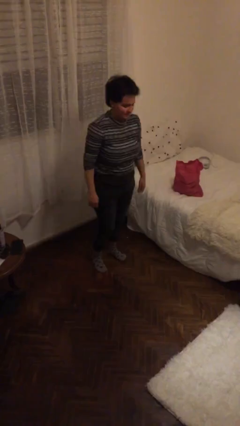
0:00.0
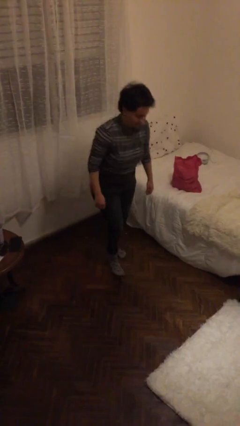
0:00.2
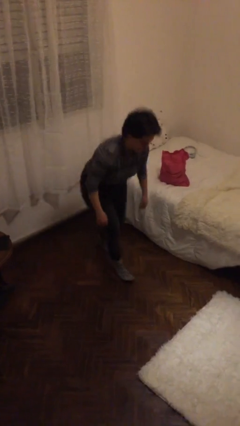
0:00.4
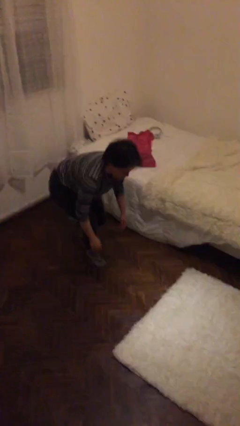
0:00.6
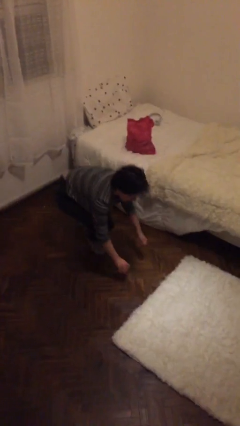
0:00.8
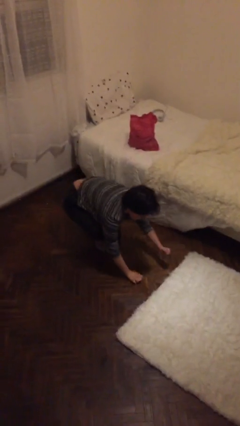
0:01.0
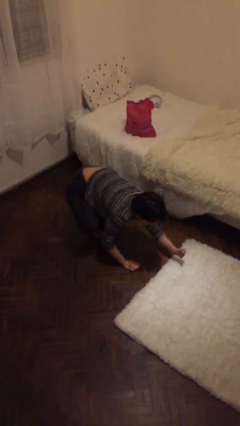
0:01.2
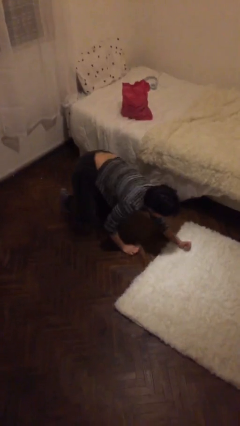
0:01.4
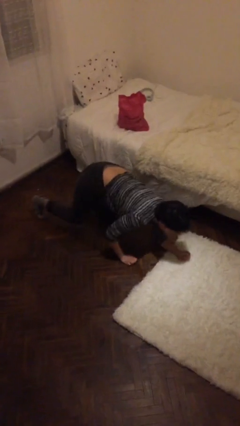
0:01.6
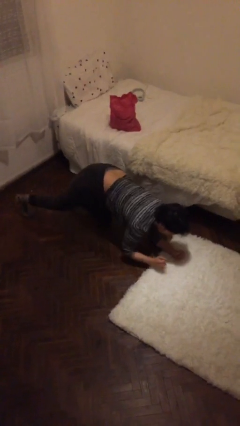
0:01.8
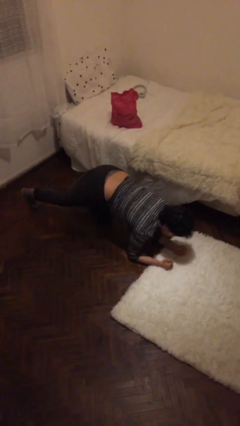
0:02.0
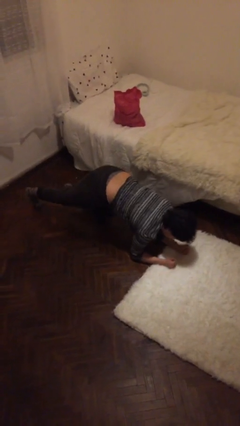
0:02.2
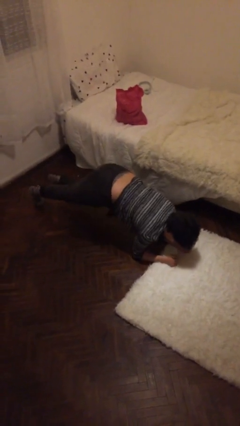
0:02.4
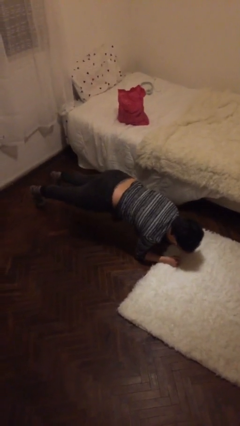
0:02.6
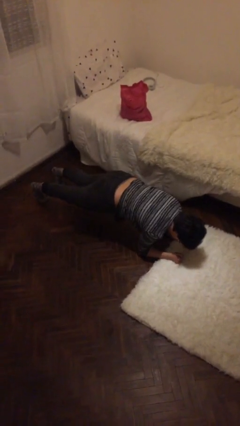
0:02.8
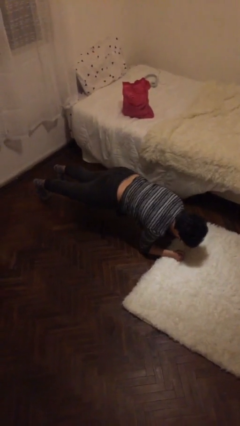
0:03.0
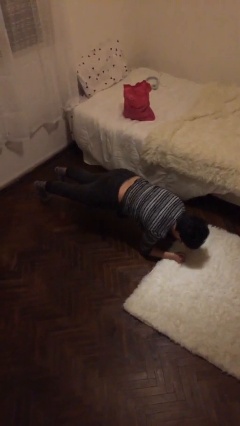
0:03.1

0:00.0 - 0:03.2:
person exercises with plank

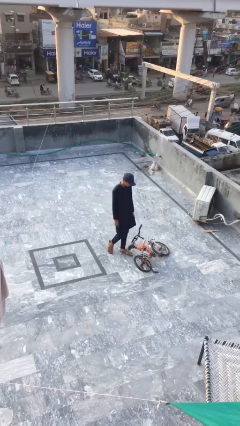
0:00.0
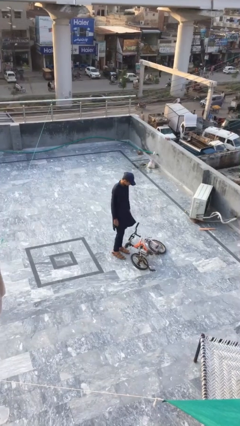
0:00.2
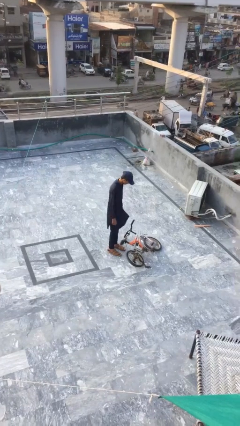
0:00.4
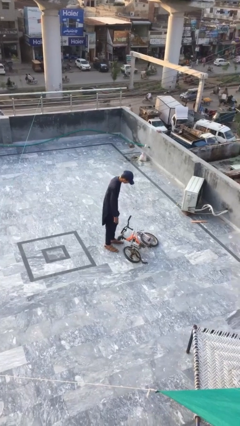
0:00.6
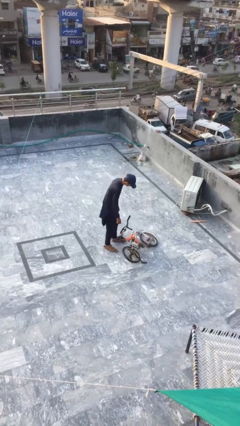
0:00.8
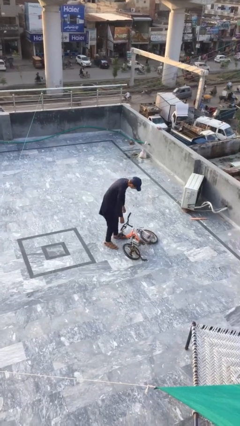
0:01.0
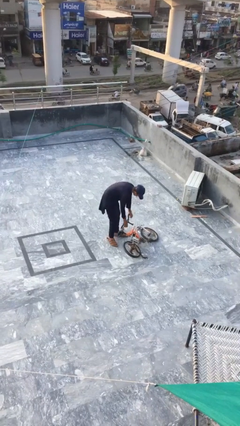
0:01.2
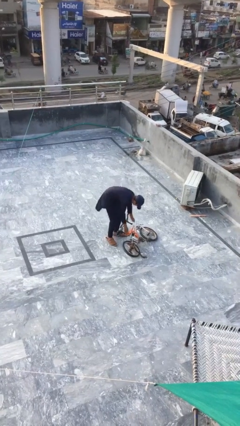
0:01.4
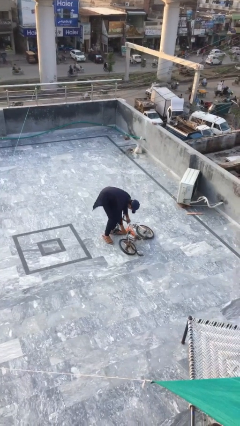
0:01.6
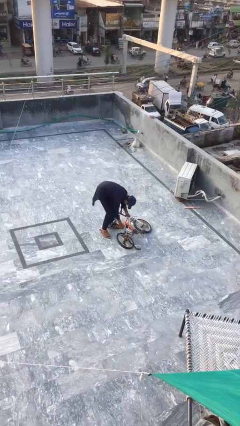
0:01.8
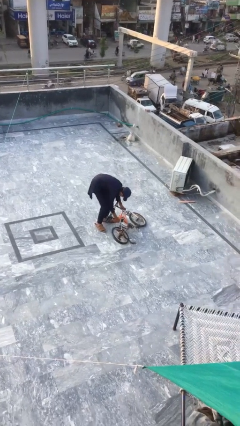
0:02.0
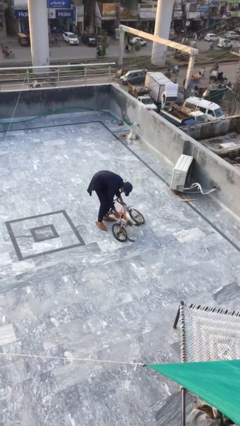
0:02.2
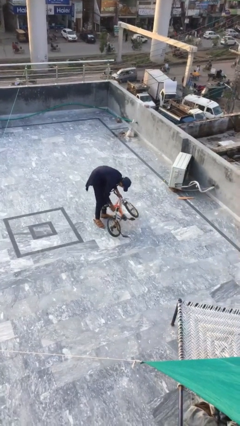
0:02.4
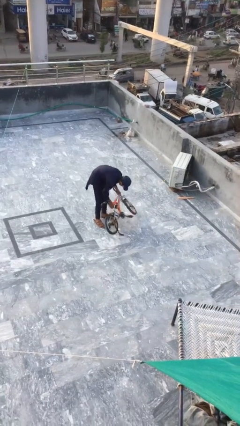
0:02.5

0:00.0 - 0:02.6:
person picks up object from floor

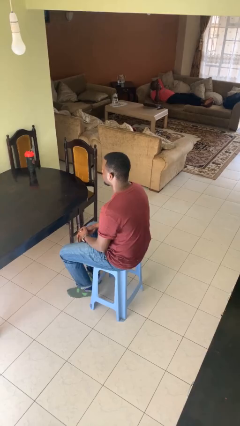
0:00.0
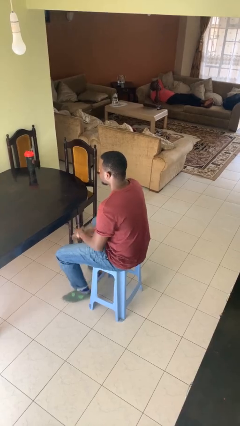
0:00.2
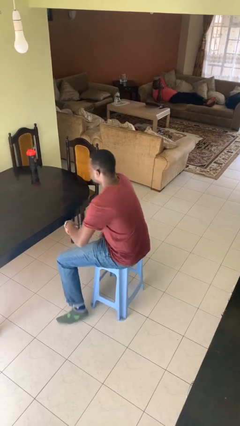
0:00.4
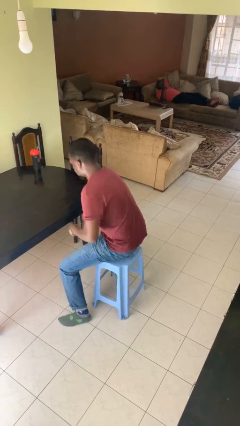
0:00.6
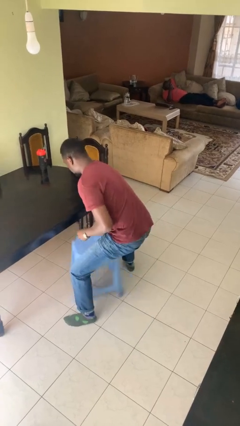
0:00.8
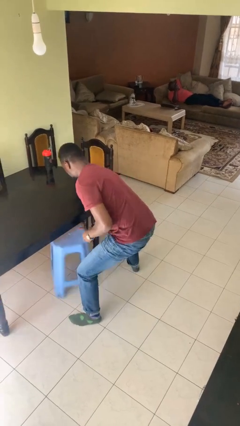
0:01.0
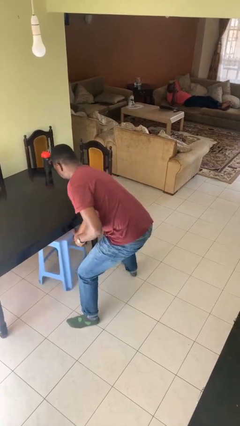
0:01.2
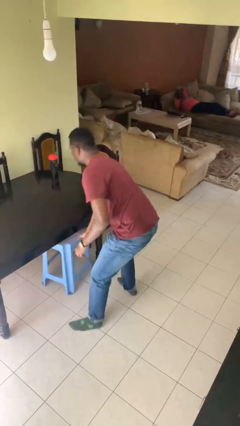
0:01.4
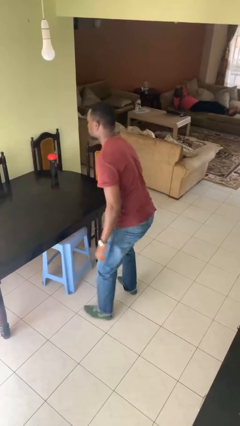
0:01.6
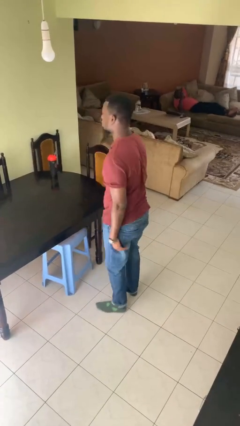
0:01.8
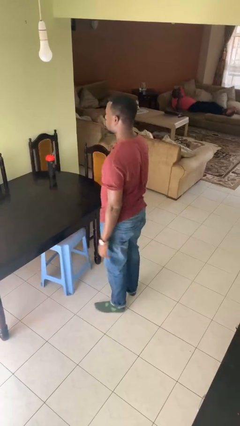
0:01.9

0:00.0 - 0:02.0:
person stands up

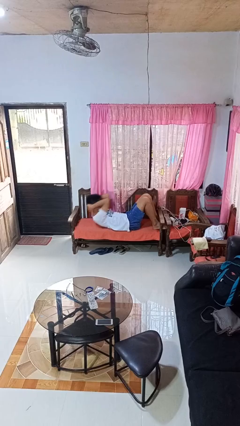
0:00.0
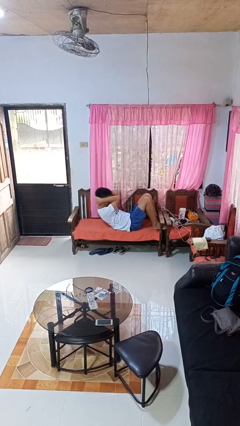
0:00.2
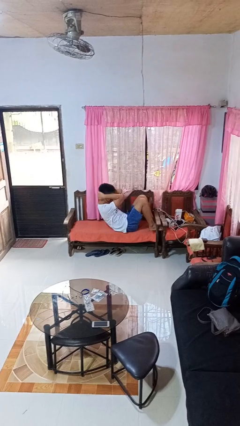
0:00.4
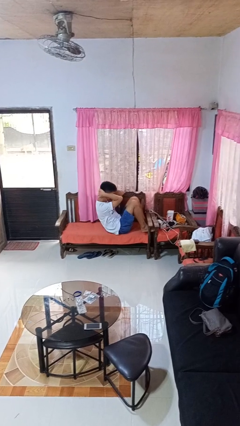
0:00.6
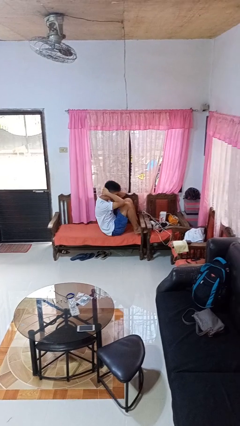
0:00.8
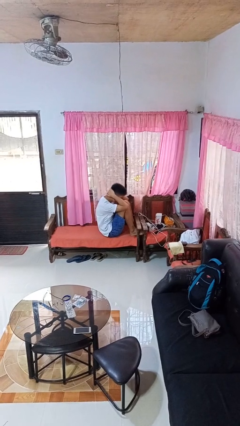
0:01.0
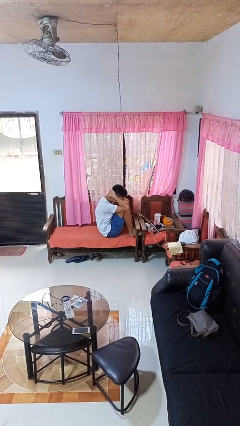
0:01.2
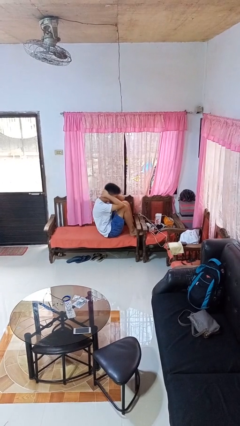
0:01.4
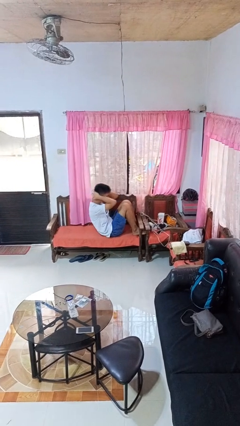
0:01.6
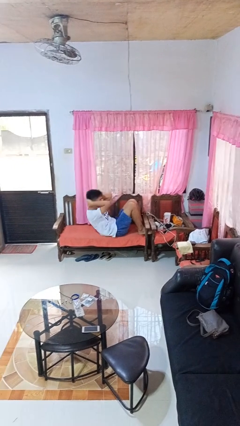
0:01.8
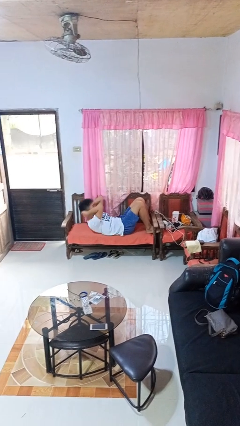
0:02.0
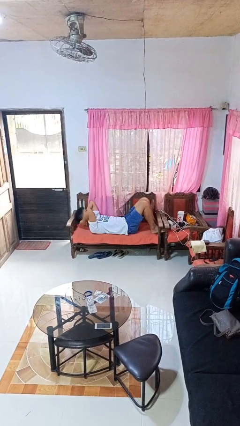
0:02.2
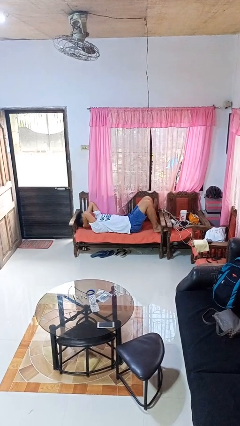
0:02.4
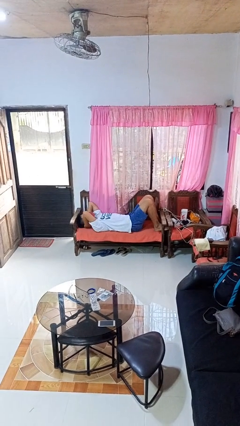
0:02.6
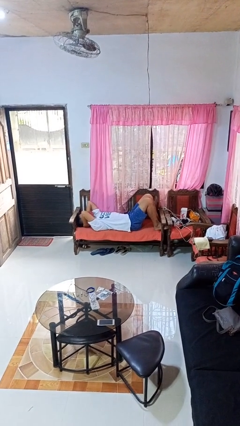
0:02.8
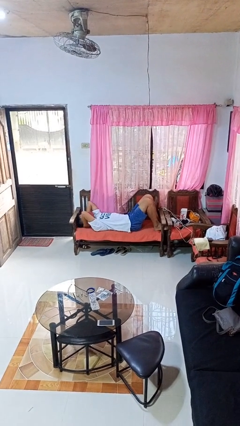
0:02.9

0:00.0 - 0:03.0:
person exercises with situp

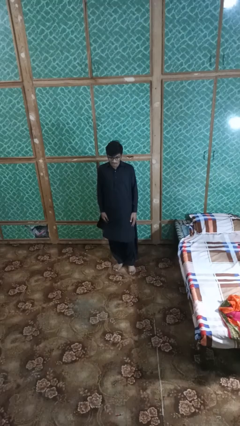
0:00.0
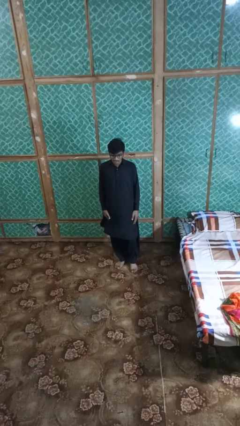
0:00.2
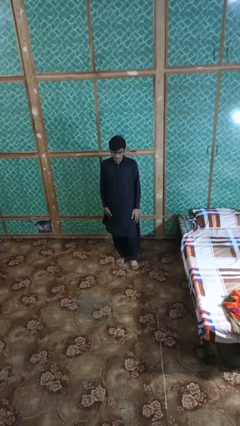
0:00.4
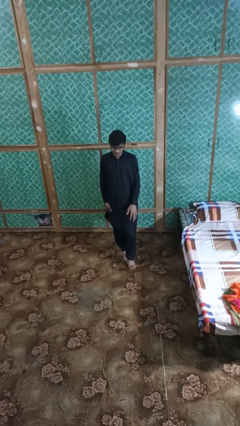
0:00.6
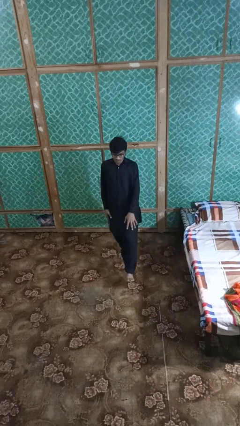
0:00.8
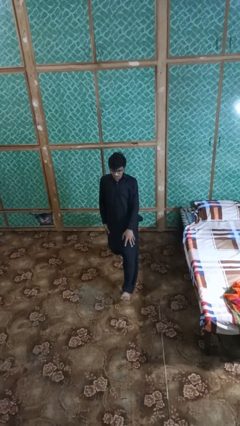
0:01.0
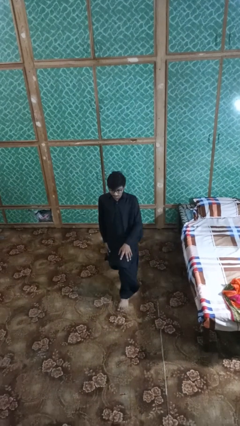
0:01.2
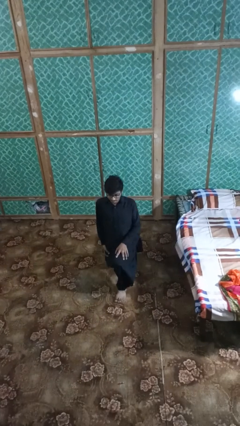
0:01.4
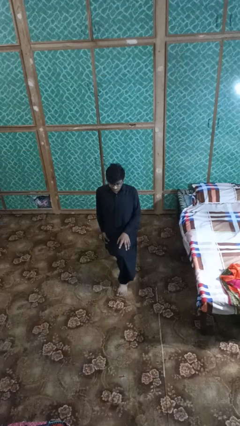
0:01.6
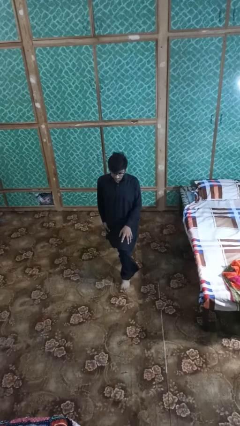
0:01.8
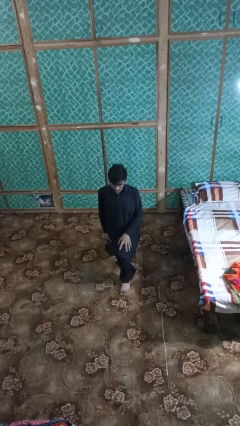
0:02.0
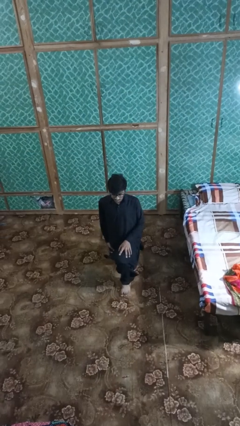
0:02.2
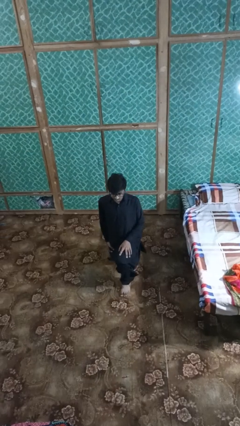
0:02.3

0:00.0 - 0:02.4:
person exercises with lunges

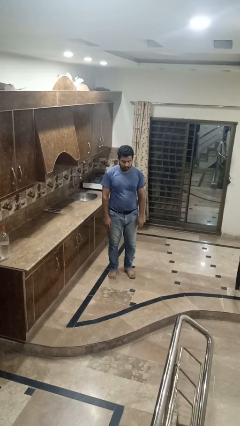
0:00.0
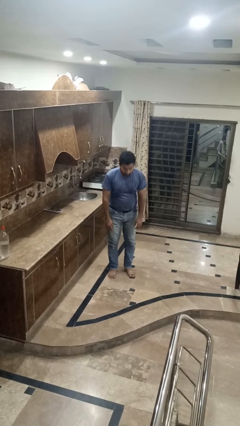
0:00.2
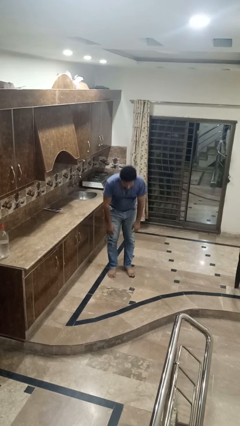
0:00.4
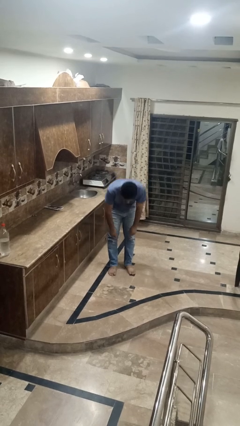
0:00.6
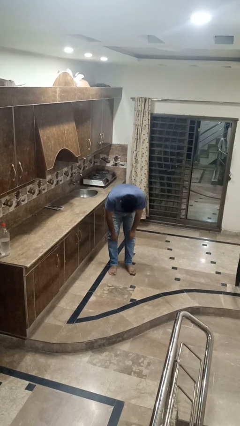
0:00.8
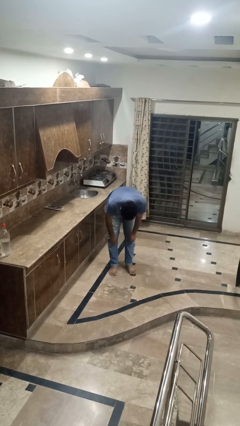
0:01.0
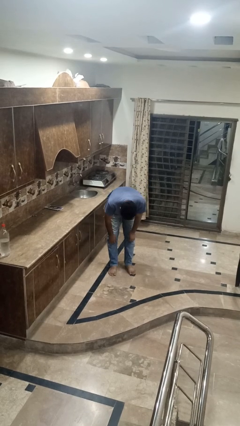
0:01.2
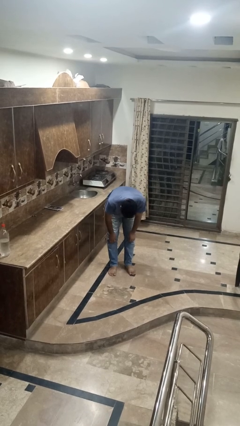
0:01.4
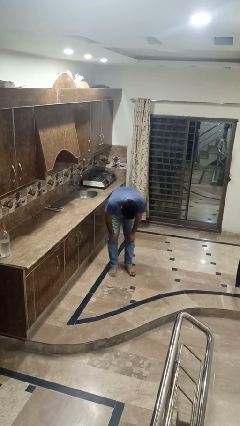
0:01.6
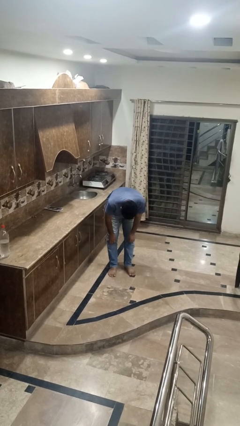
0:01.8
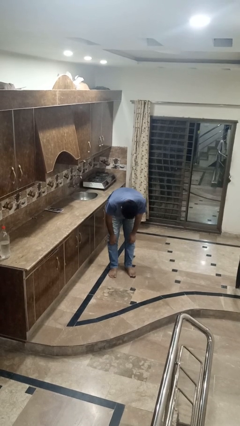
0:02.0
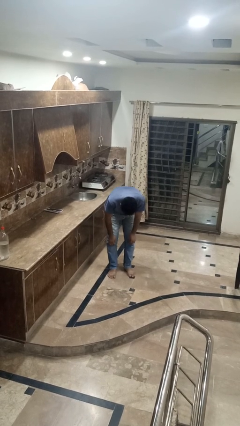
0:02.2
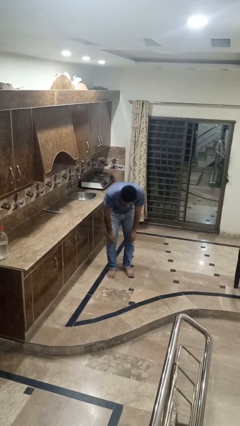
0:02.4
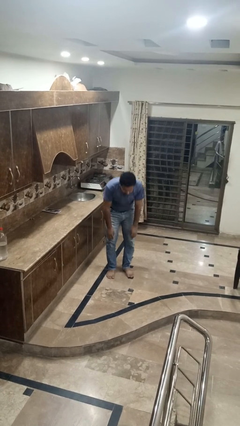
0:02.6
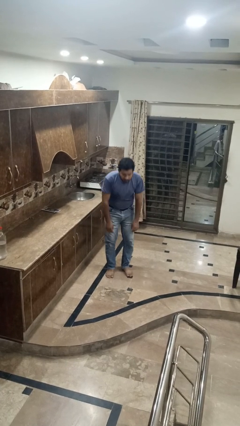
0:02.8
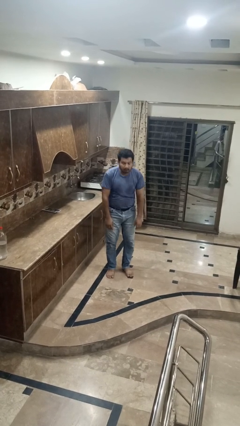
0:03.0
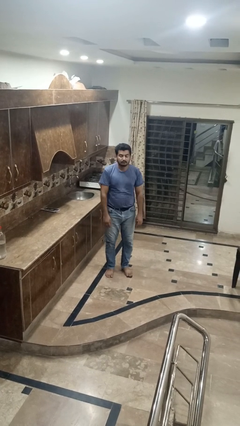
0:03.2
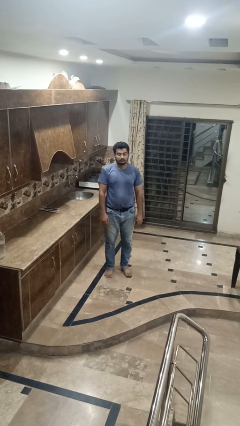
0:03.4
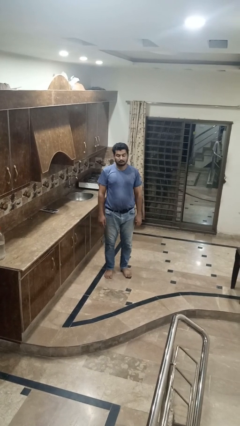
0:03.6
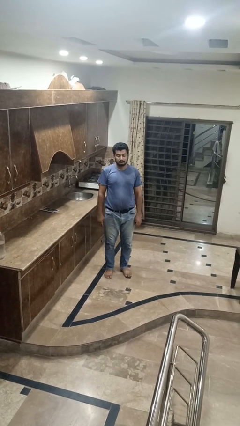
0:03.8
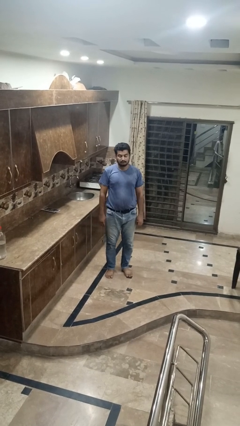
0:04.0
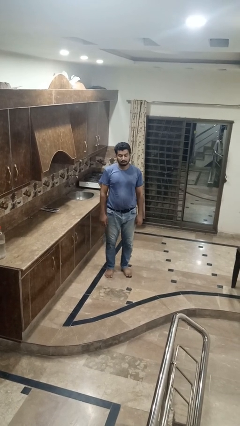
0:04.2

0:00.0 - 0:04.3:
person bows
